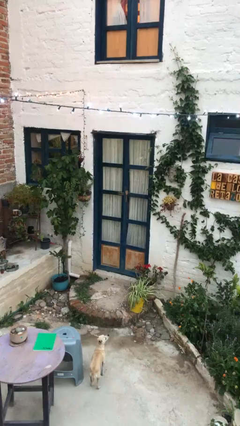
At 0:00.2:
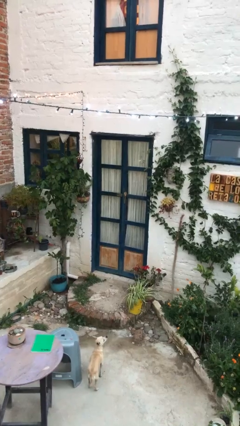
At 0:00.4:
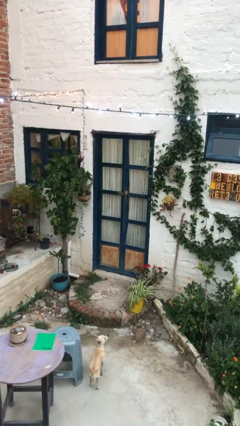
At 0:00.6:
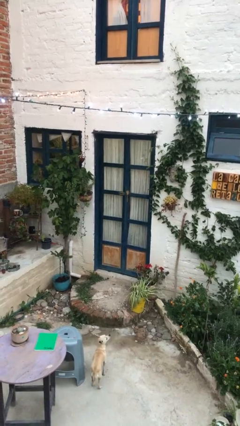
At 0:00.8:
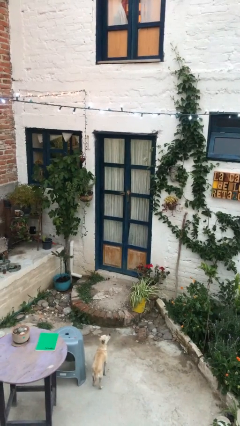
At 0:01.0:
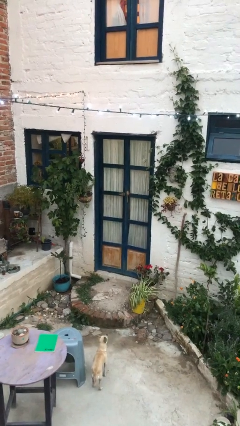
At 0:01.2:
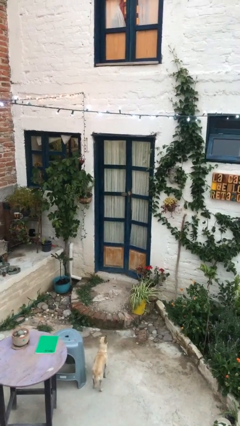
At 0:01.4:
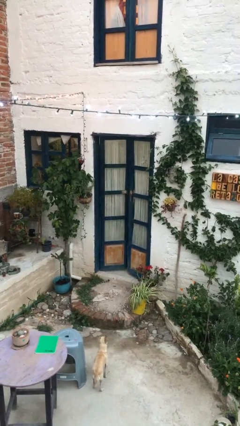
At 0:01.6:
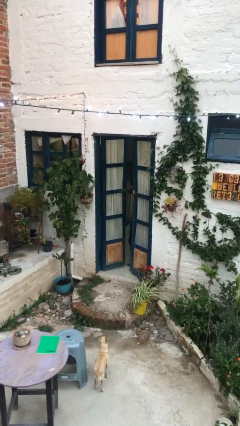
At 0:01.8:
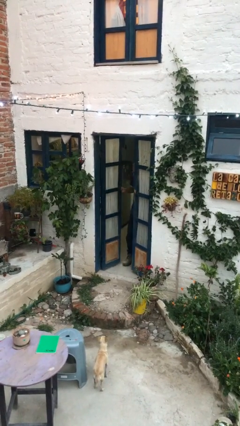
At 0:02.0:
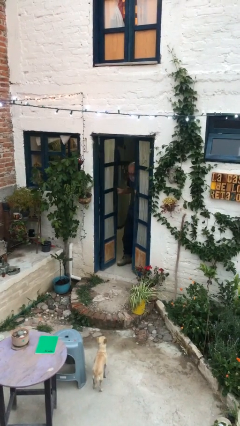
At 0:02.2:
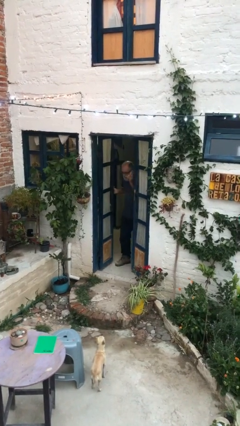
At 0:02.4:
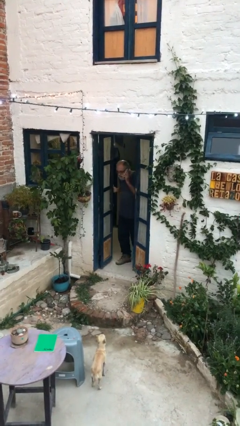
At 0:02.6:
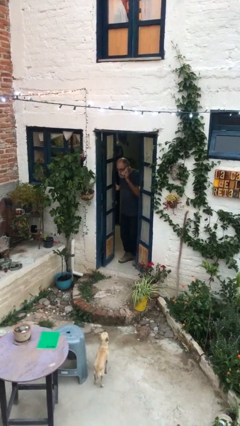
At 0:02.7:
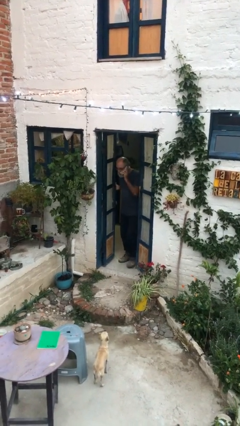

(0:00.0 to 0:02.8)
person opens facility door

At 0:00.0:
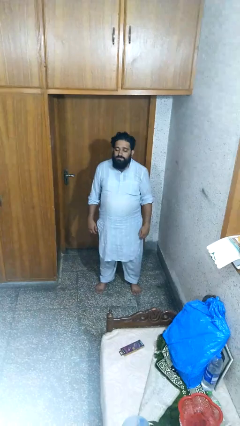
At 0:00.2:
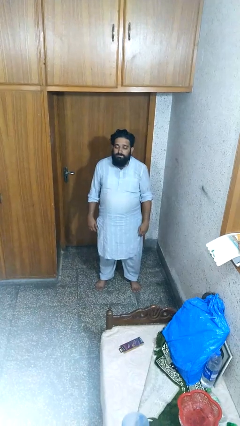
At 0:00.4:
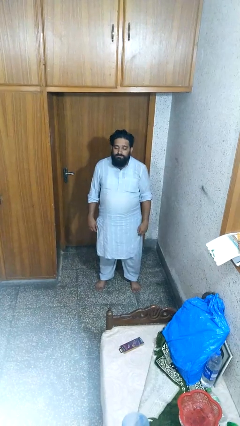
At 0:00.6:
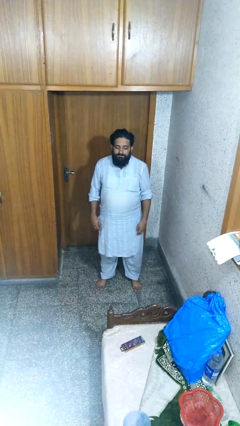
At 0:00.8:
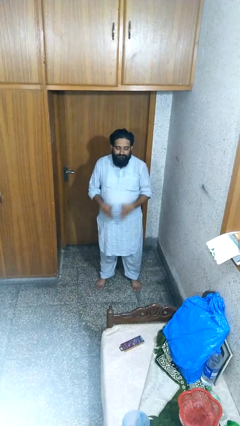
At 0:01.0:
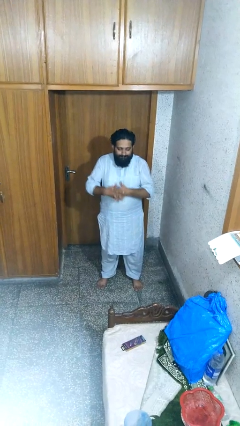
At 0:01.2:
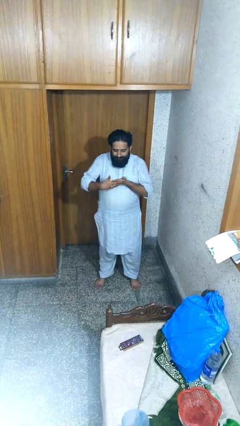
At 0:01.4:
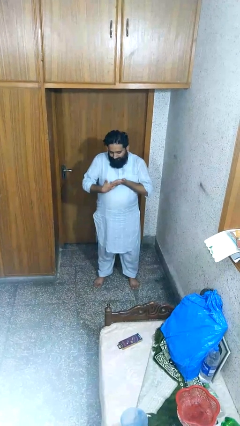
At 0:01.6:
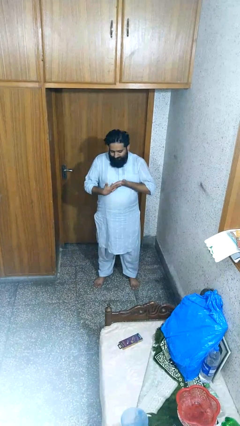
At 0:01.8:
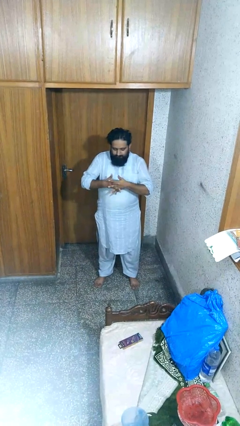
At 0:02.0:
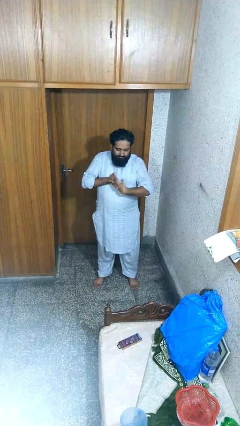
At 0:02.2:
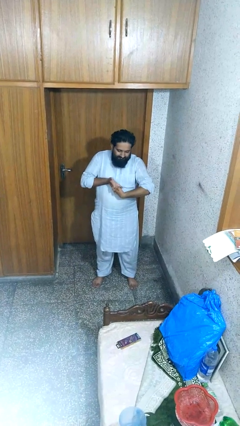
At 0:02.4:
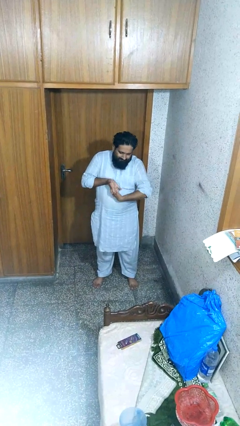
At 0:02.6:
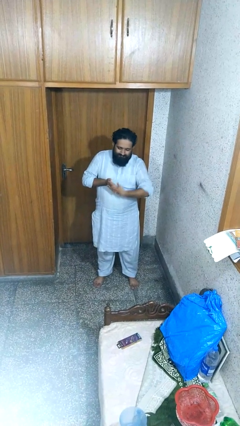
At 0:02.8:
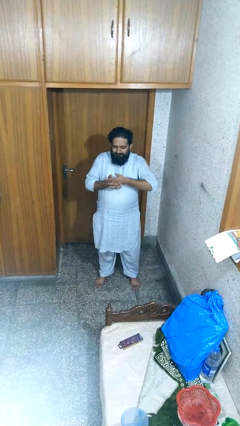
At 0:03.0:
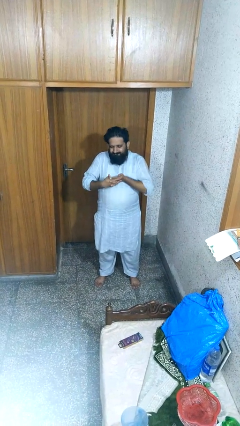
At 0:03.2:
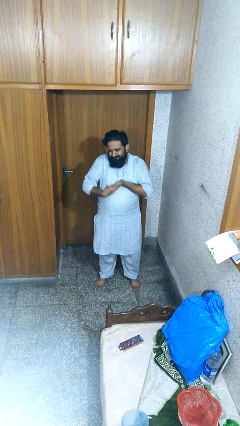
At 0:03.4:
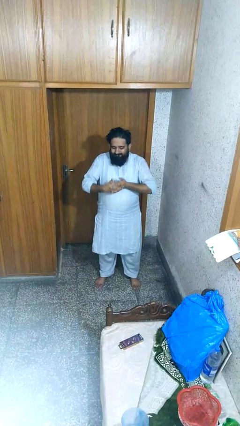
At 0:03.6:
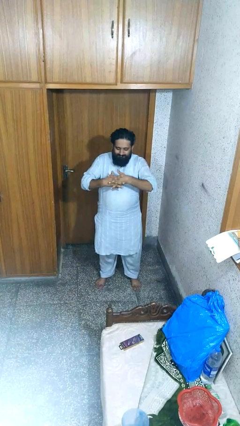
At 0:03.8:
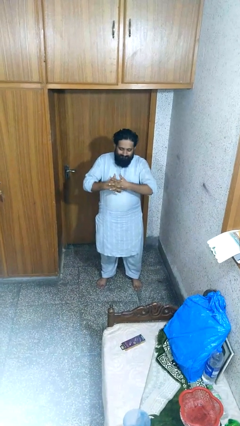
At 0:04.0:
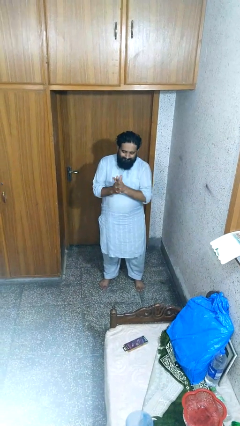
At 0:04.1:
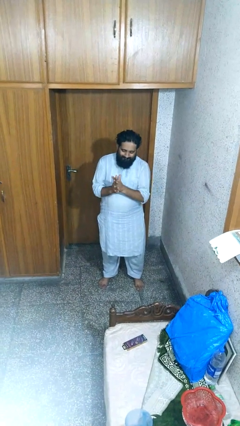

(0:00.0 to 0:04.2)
person cracks knuckles

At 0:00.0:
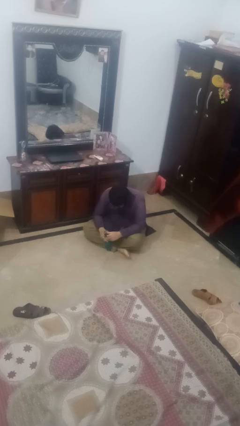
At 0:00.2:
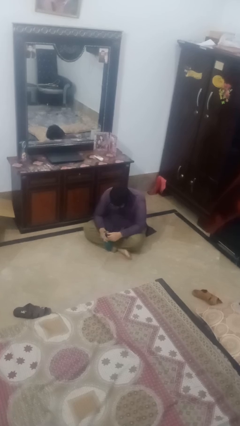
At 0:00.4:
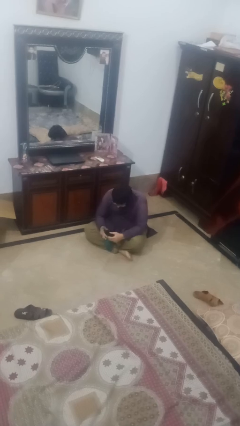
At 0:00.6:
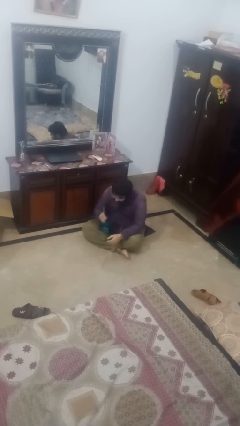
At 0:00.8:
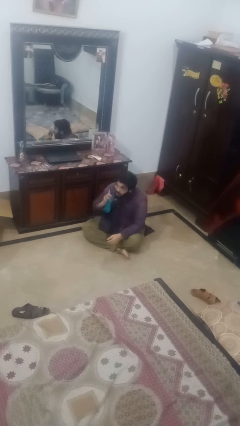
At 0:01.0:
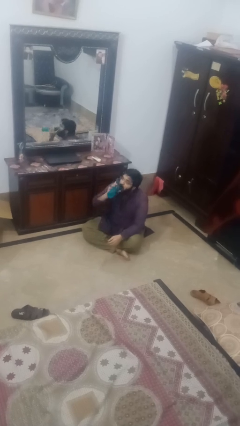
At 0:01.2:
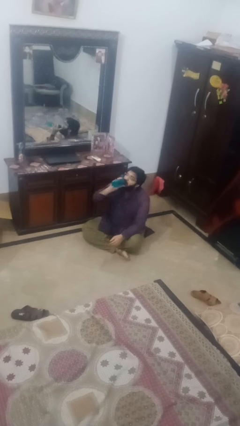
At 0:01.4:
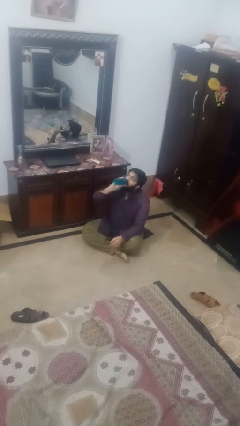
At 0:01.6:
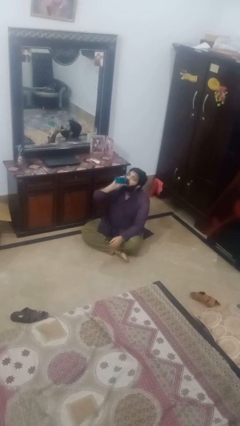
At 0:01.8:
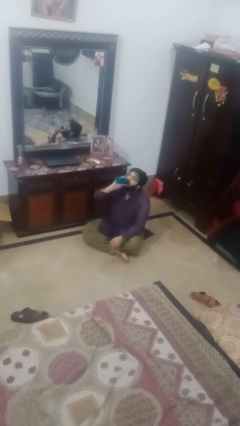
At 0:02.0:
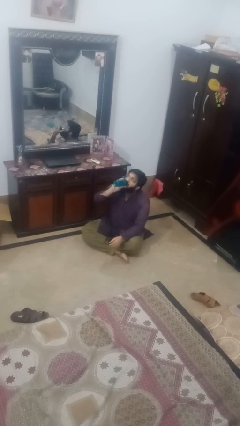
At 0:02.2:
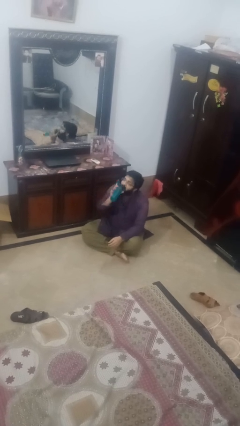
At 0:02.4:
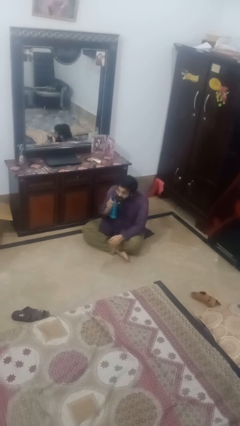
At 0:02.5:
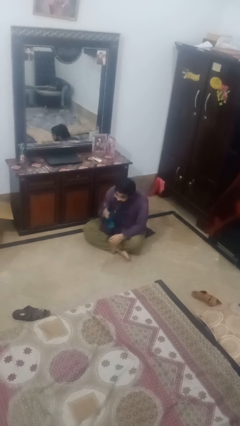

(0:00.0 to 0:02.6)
person drinks from bottle

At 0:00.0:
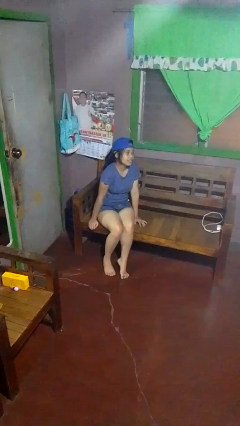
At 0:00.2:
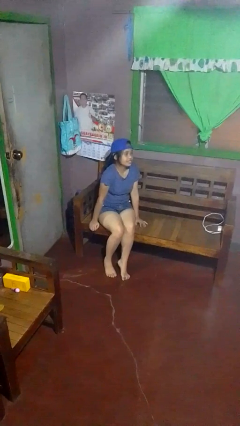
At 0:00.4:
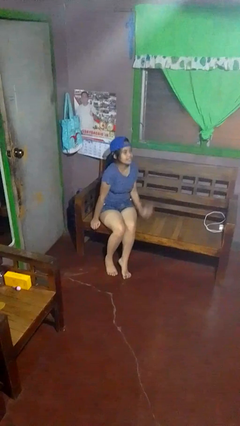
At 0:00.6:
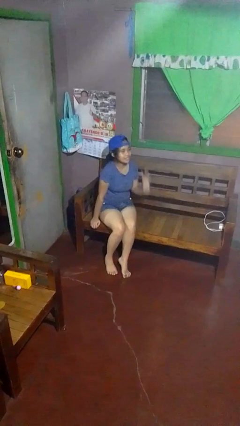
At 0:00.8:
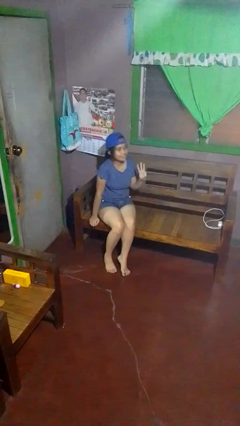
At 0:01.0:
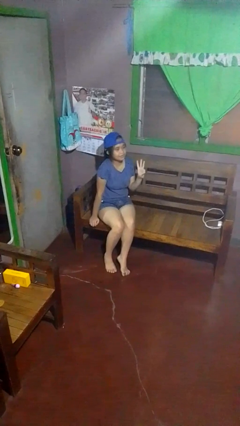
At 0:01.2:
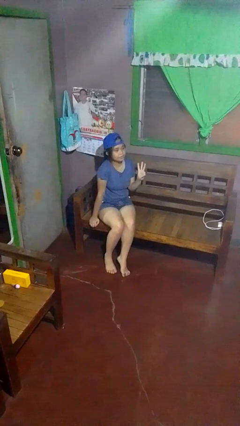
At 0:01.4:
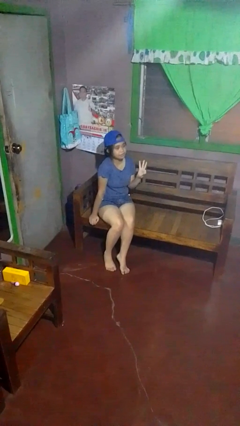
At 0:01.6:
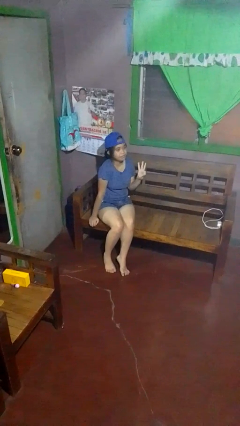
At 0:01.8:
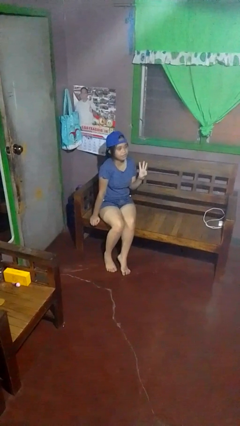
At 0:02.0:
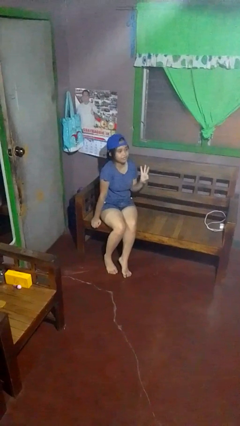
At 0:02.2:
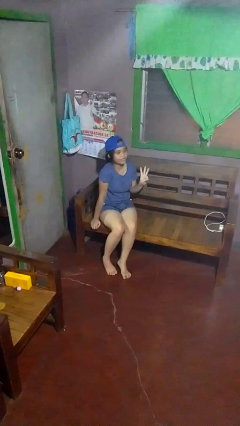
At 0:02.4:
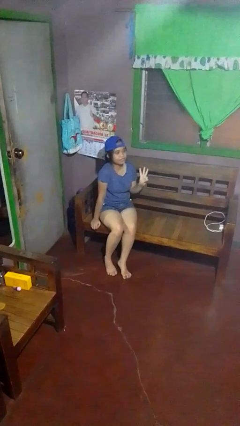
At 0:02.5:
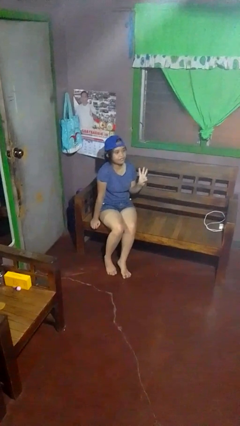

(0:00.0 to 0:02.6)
person gestures number three

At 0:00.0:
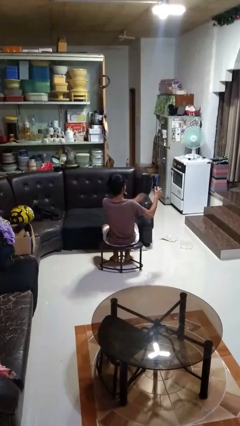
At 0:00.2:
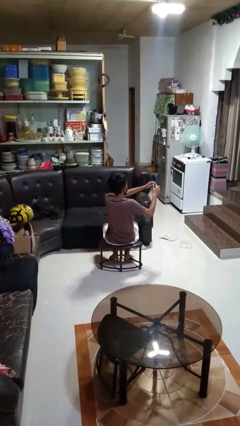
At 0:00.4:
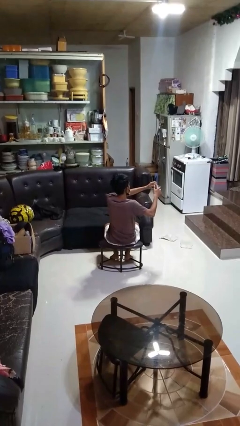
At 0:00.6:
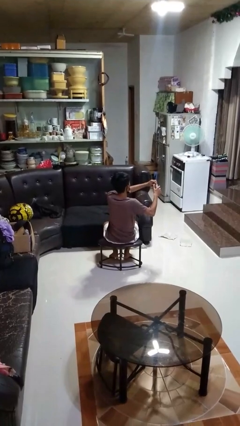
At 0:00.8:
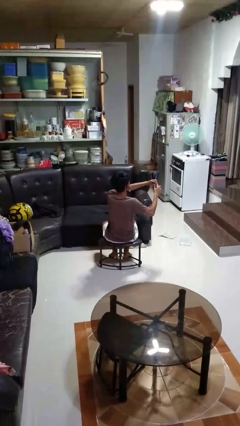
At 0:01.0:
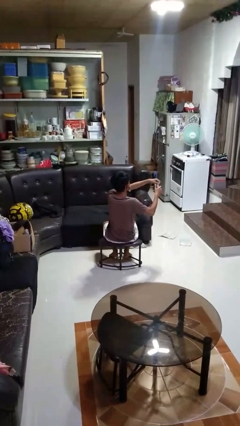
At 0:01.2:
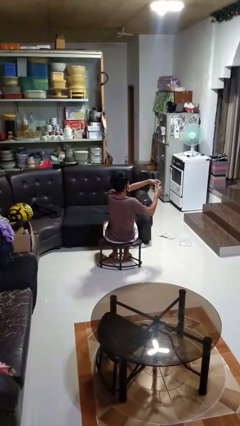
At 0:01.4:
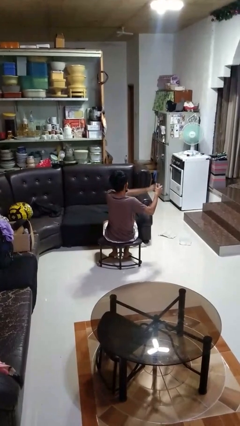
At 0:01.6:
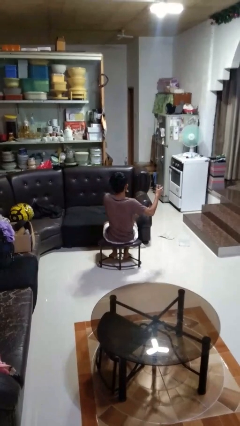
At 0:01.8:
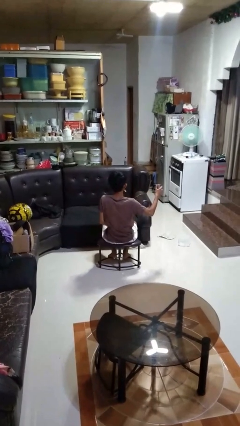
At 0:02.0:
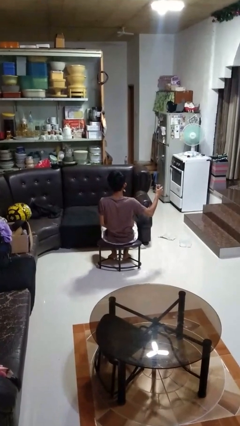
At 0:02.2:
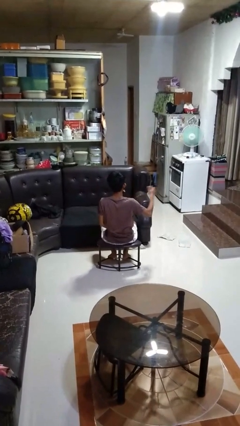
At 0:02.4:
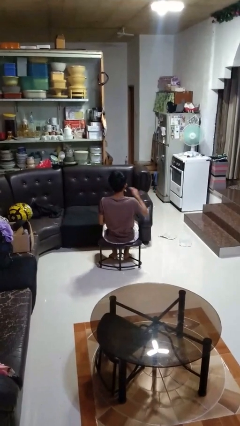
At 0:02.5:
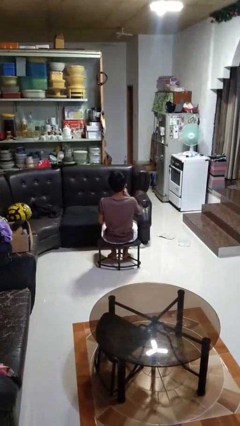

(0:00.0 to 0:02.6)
person opens beverage can

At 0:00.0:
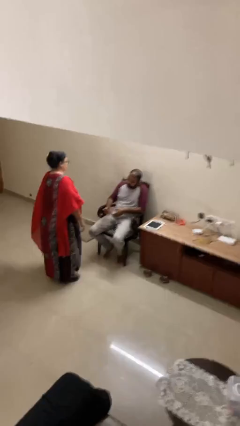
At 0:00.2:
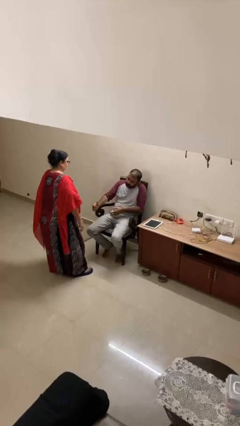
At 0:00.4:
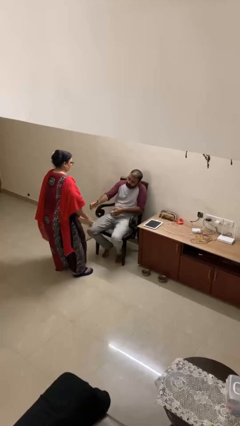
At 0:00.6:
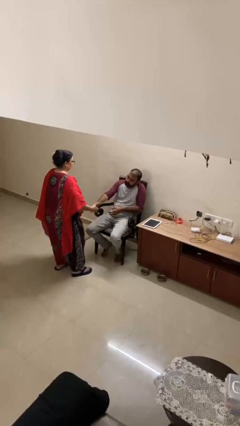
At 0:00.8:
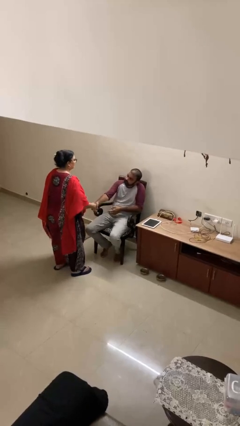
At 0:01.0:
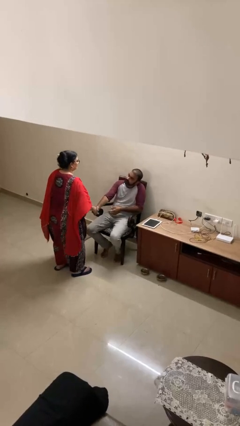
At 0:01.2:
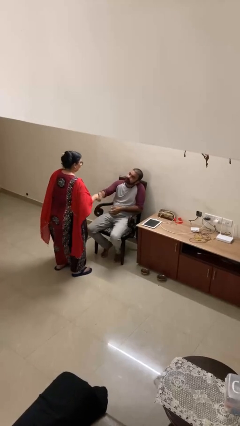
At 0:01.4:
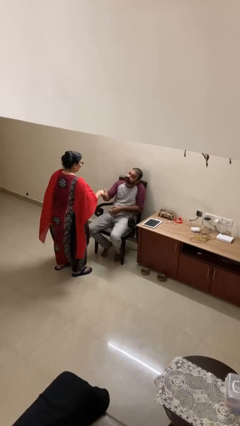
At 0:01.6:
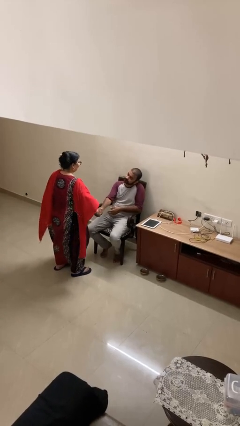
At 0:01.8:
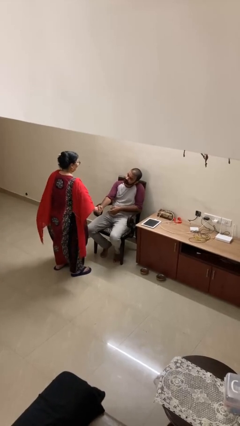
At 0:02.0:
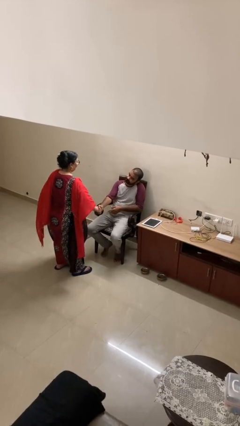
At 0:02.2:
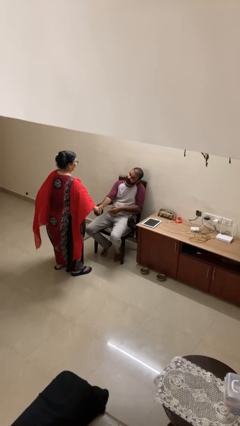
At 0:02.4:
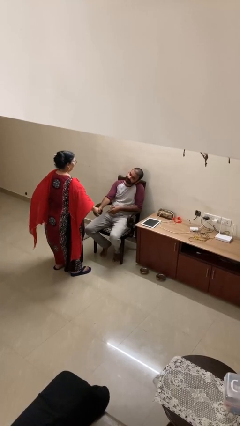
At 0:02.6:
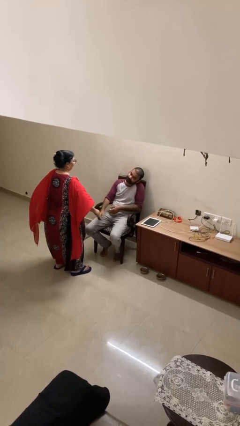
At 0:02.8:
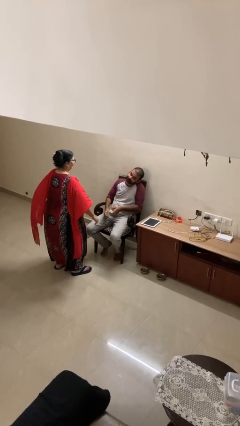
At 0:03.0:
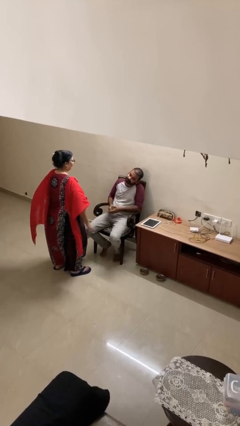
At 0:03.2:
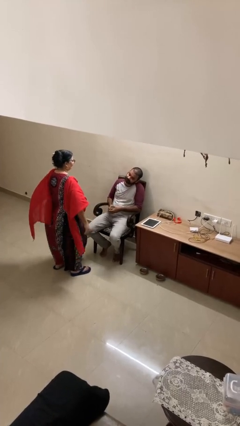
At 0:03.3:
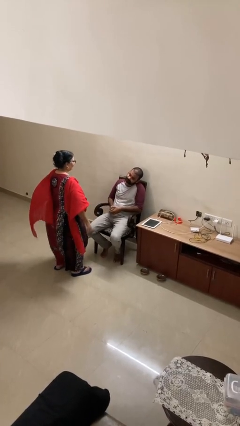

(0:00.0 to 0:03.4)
person shakes hand
